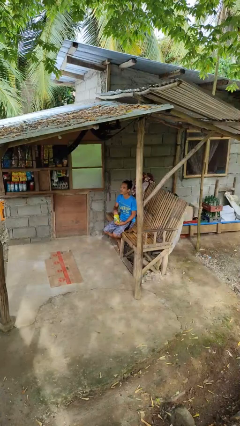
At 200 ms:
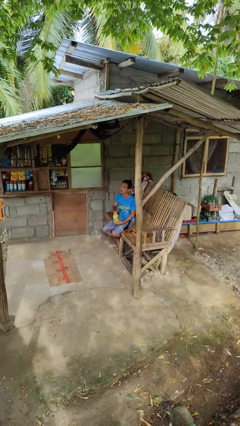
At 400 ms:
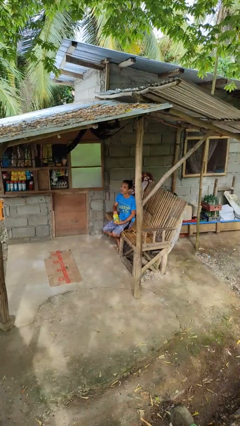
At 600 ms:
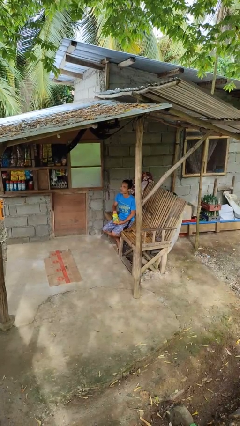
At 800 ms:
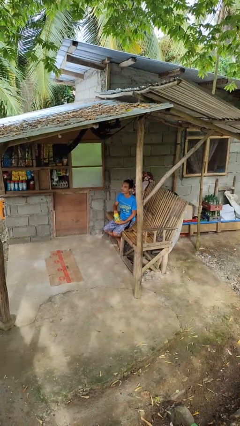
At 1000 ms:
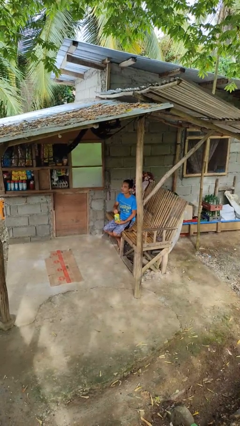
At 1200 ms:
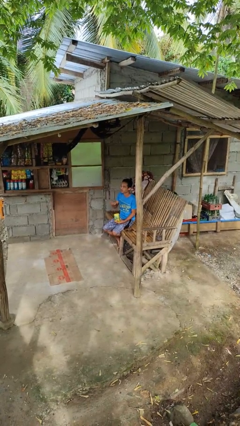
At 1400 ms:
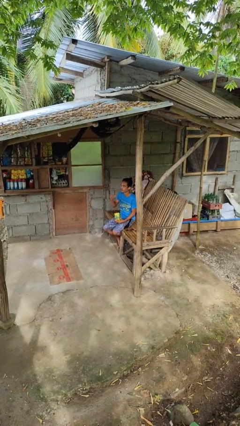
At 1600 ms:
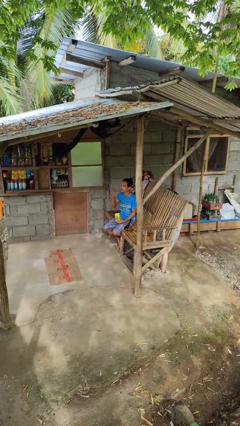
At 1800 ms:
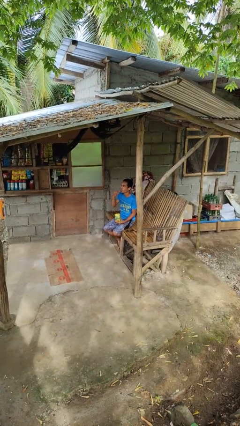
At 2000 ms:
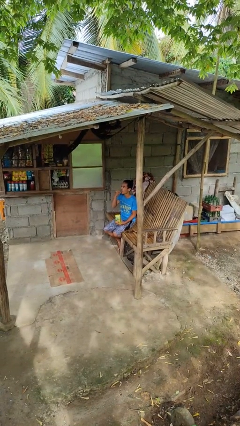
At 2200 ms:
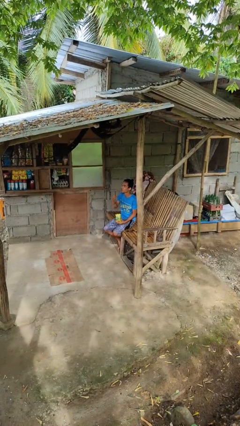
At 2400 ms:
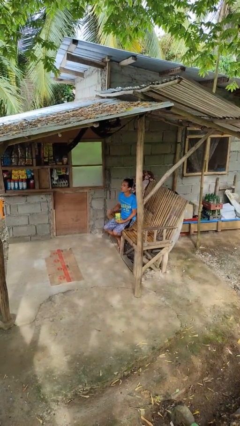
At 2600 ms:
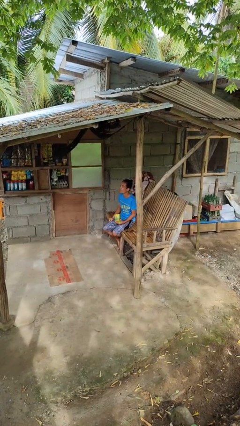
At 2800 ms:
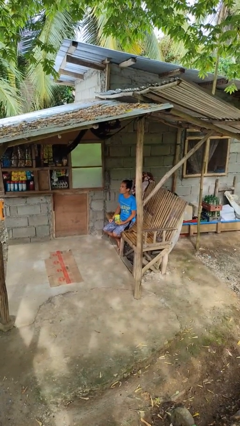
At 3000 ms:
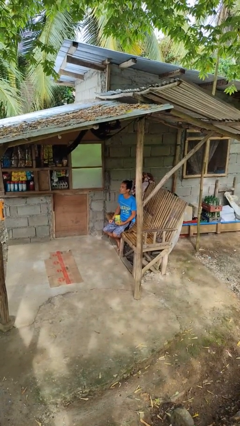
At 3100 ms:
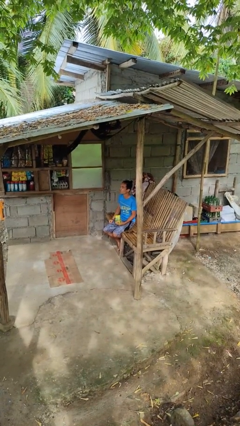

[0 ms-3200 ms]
person eats snack from bag

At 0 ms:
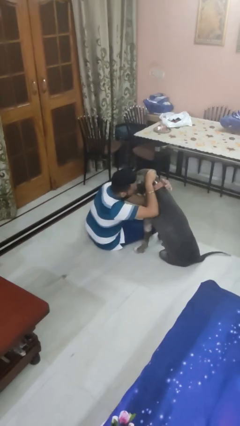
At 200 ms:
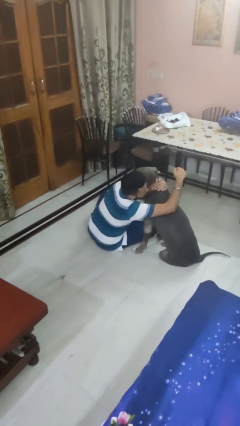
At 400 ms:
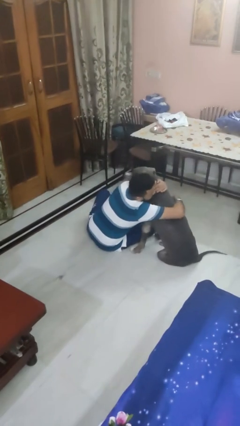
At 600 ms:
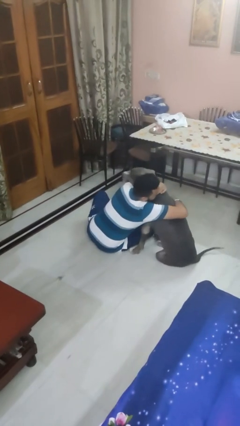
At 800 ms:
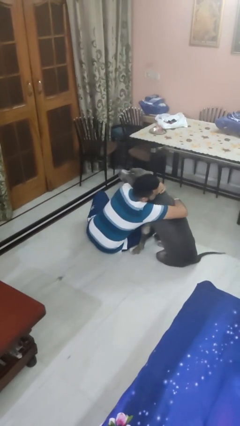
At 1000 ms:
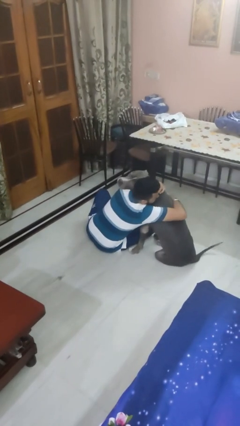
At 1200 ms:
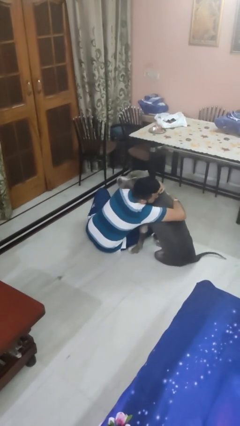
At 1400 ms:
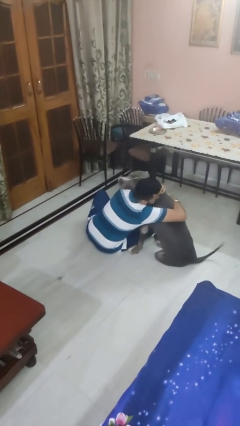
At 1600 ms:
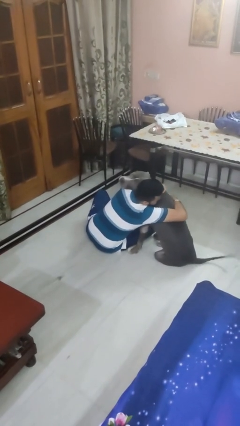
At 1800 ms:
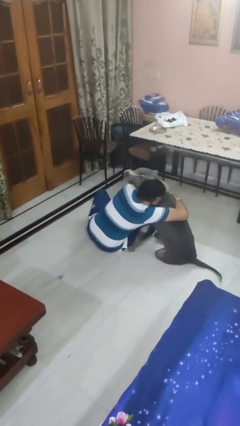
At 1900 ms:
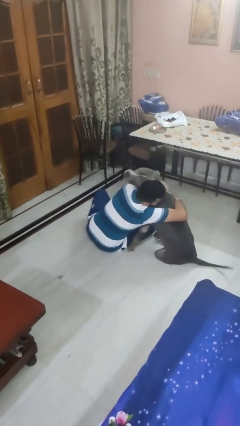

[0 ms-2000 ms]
person hugs dog

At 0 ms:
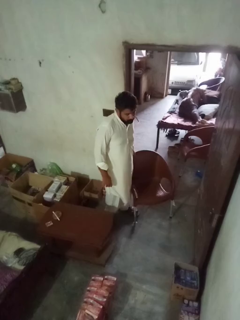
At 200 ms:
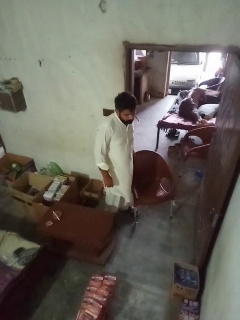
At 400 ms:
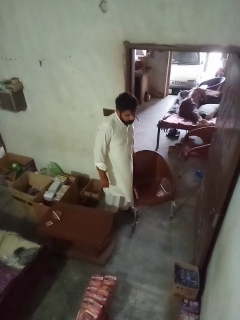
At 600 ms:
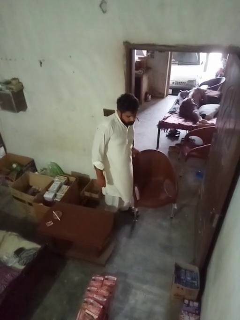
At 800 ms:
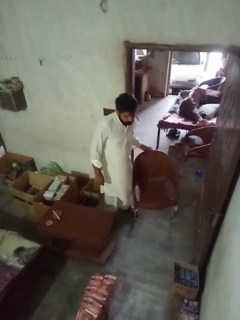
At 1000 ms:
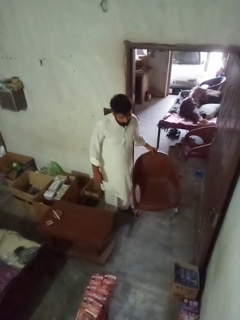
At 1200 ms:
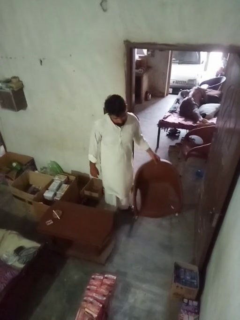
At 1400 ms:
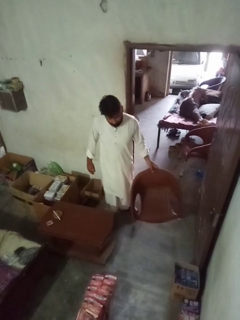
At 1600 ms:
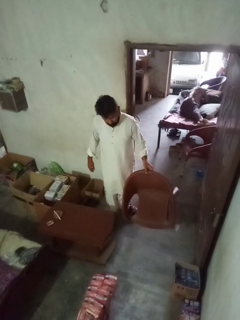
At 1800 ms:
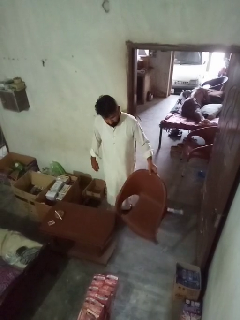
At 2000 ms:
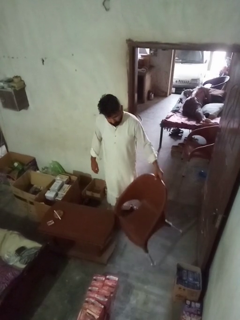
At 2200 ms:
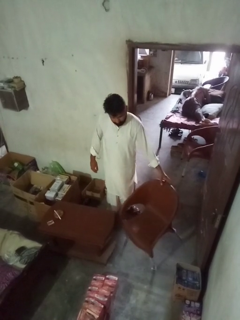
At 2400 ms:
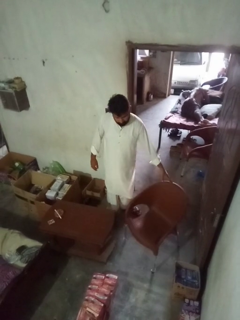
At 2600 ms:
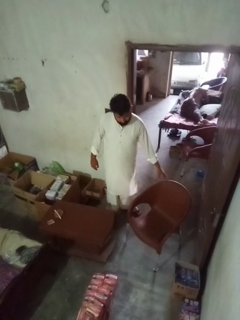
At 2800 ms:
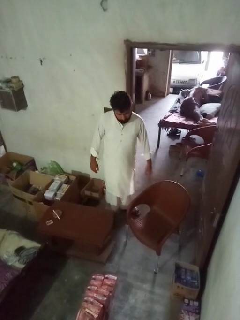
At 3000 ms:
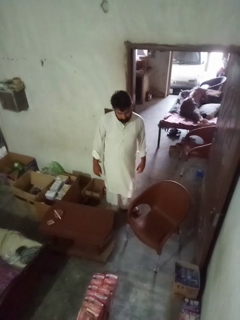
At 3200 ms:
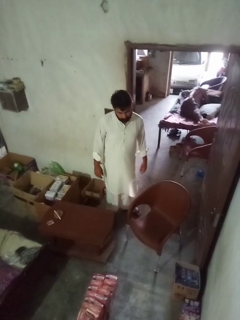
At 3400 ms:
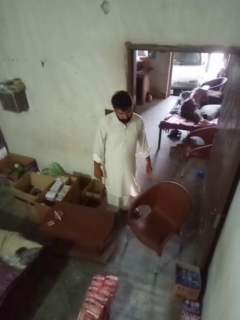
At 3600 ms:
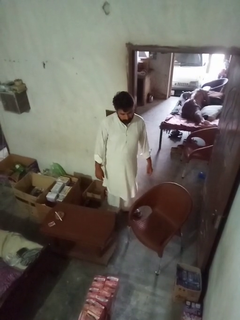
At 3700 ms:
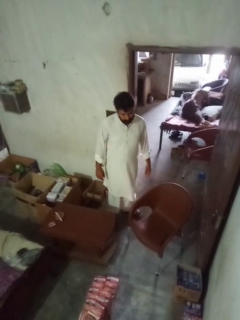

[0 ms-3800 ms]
person pushes in chair

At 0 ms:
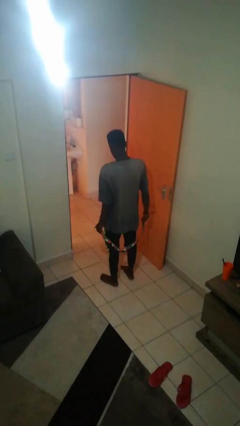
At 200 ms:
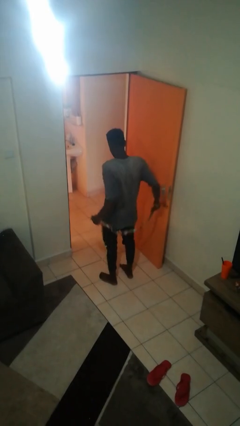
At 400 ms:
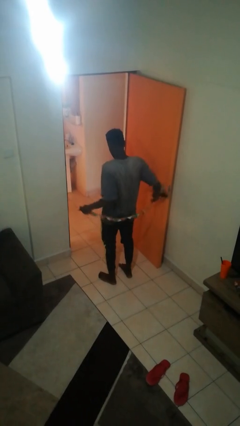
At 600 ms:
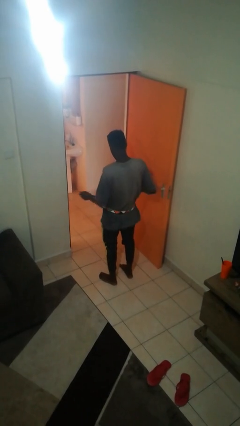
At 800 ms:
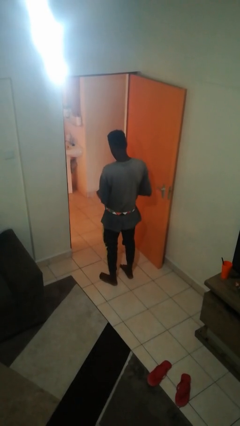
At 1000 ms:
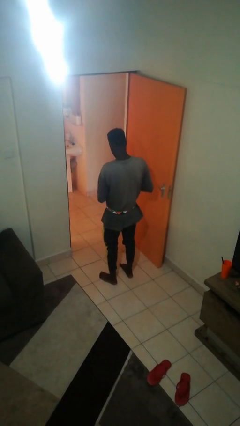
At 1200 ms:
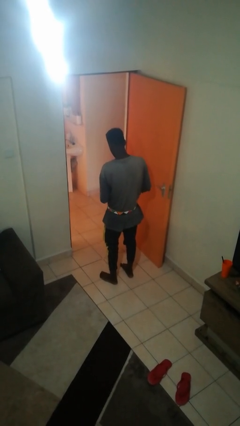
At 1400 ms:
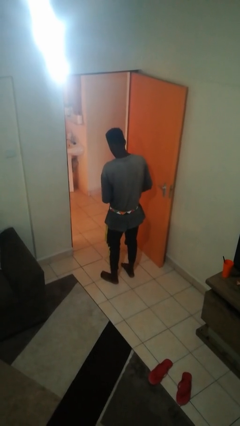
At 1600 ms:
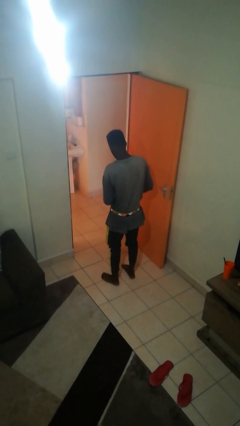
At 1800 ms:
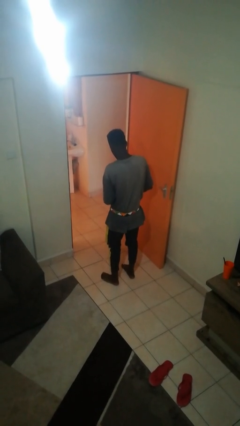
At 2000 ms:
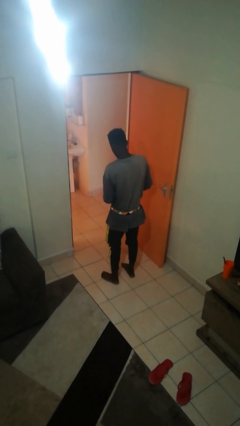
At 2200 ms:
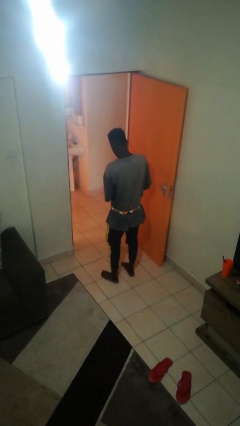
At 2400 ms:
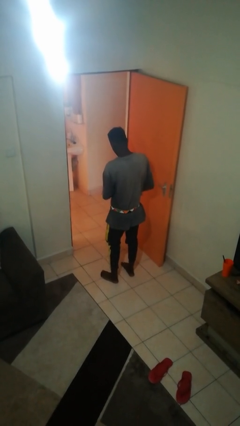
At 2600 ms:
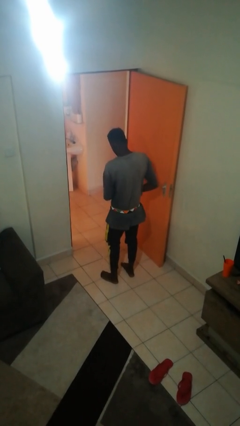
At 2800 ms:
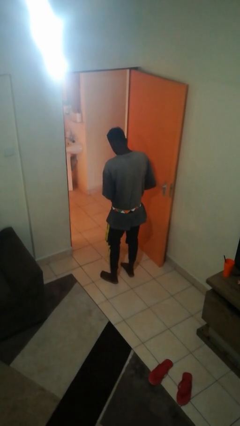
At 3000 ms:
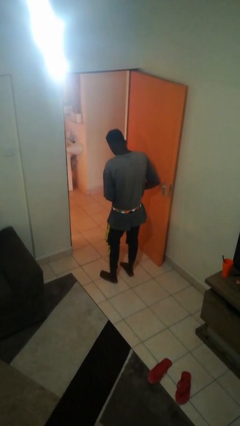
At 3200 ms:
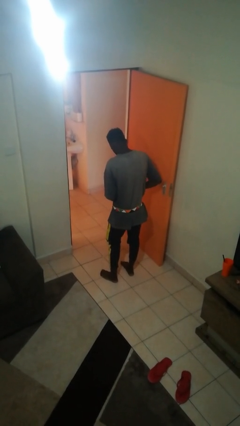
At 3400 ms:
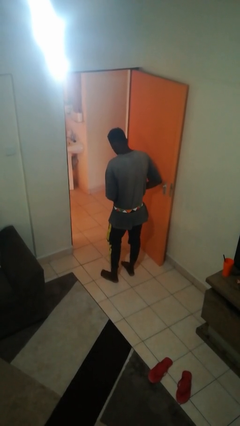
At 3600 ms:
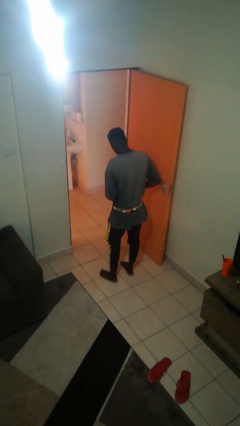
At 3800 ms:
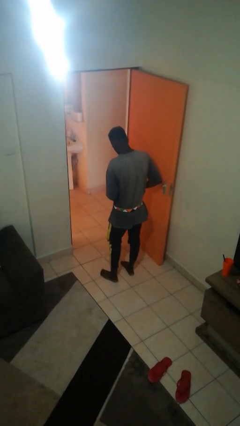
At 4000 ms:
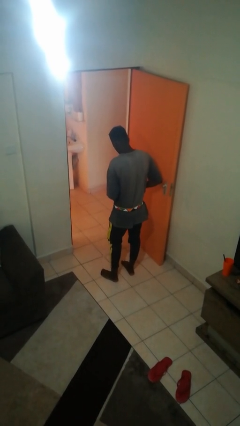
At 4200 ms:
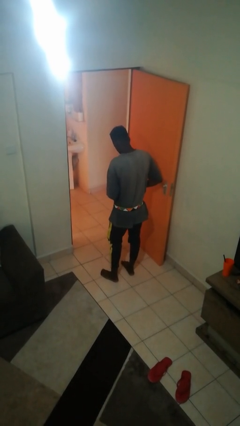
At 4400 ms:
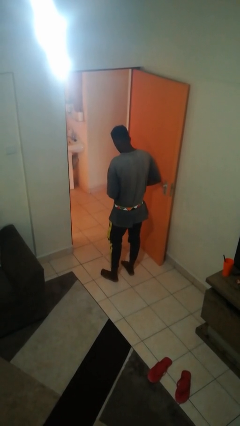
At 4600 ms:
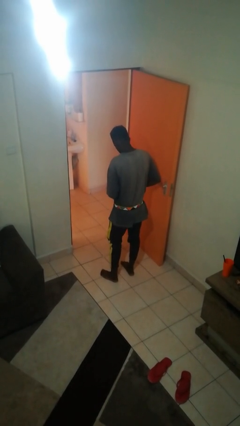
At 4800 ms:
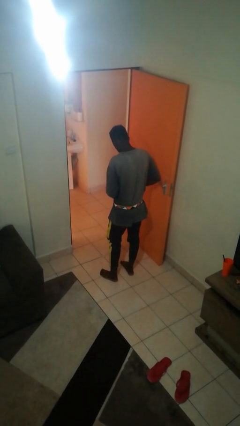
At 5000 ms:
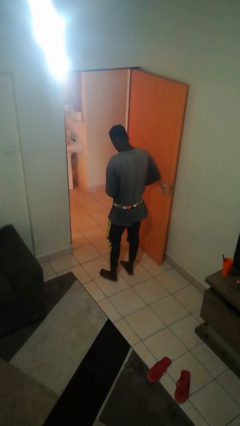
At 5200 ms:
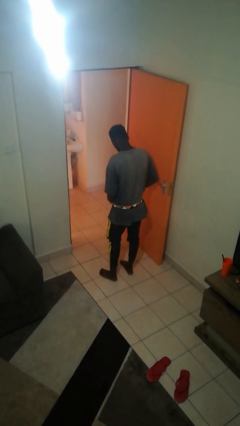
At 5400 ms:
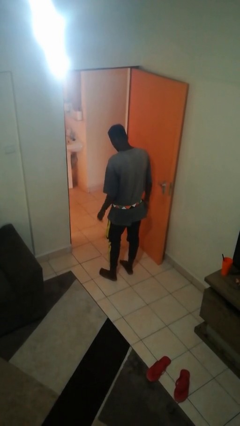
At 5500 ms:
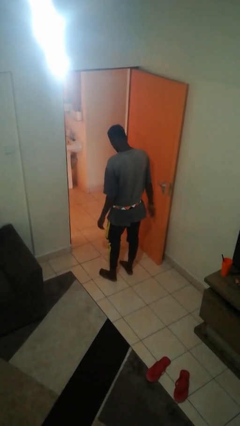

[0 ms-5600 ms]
person puts on belt

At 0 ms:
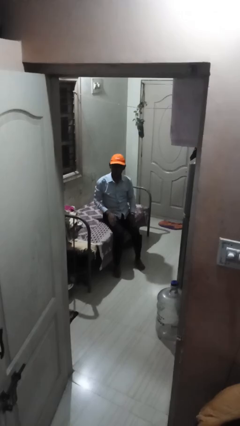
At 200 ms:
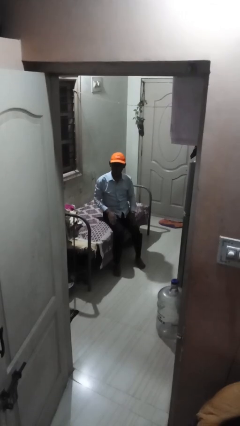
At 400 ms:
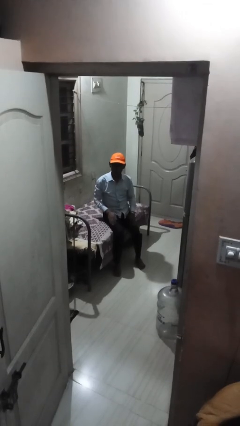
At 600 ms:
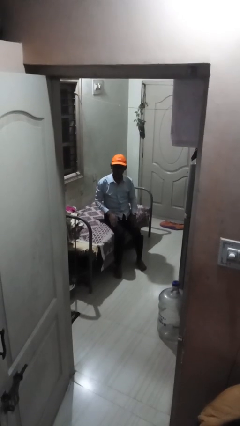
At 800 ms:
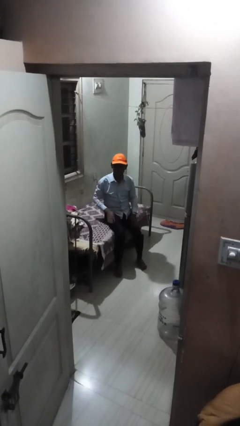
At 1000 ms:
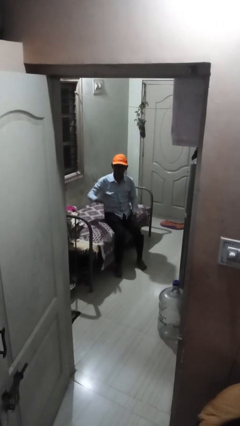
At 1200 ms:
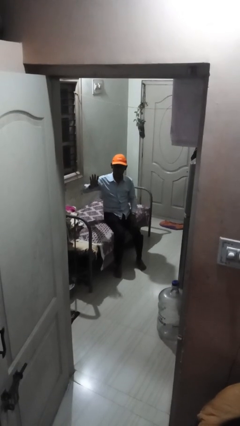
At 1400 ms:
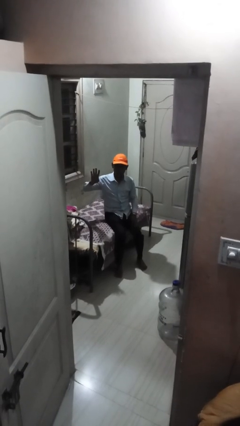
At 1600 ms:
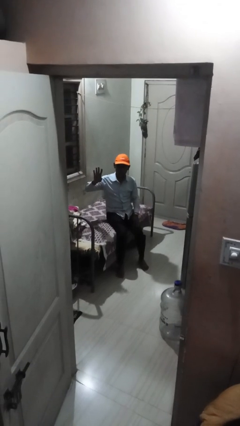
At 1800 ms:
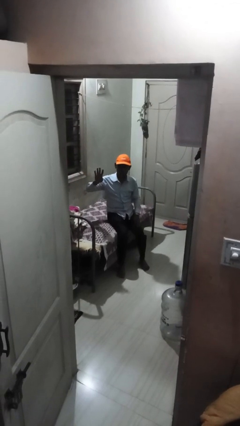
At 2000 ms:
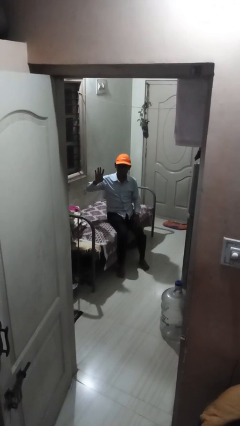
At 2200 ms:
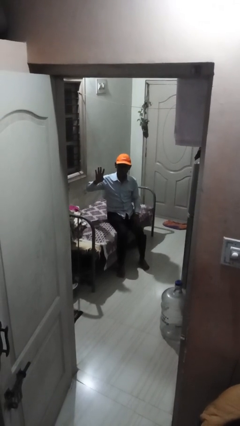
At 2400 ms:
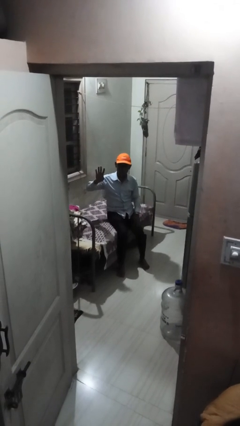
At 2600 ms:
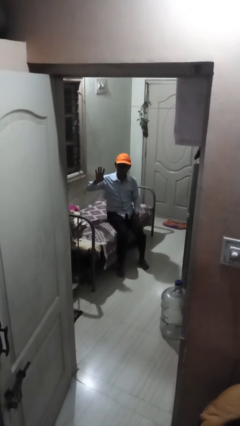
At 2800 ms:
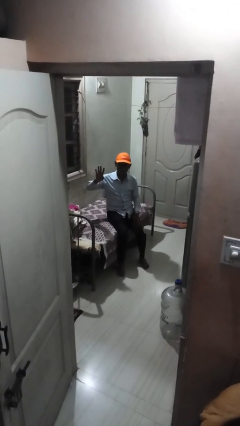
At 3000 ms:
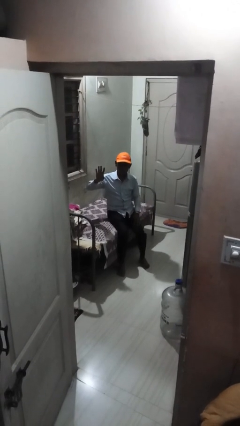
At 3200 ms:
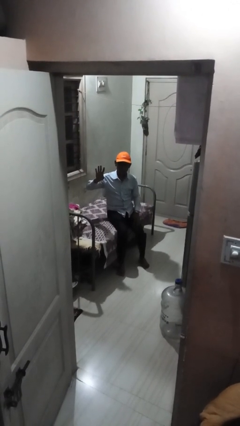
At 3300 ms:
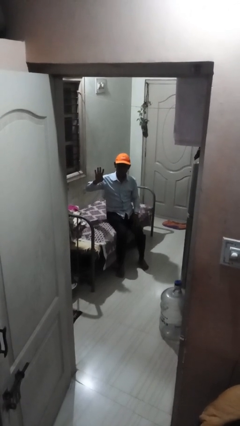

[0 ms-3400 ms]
person gestures number four
